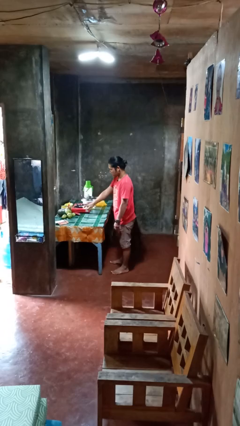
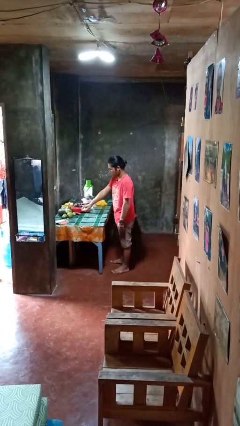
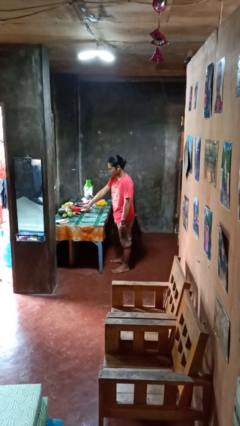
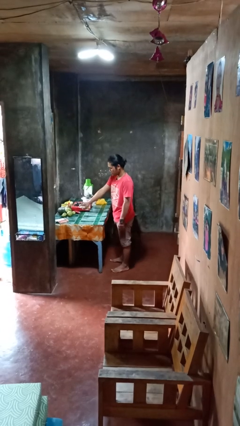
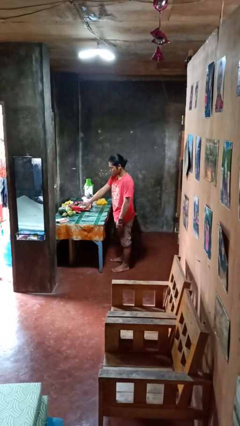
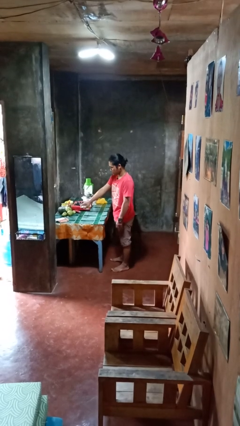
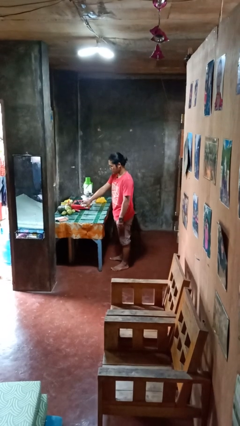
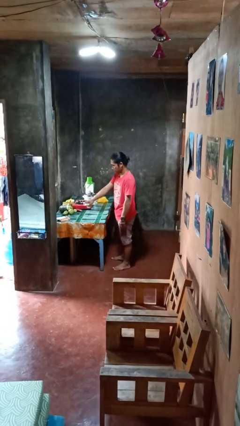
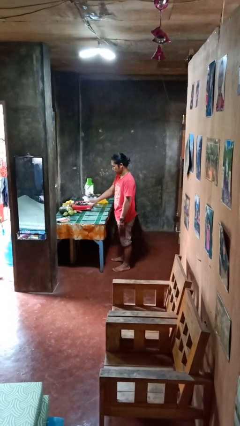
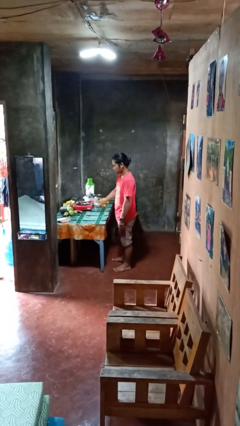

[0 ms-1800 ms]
person sprays from bottle

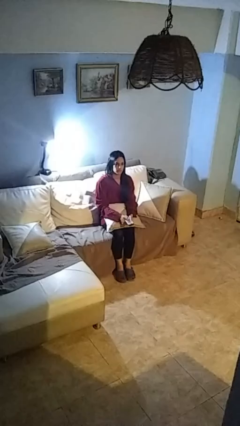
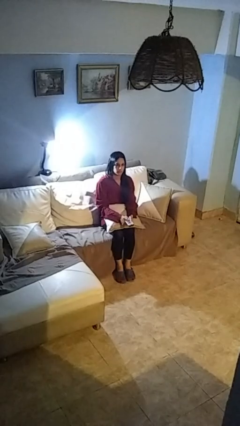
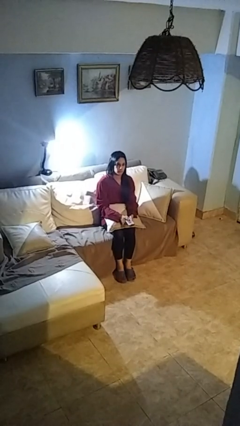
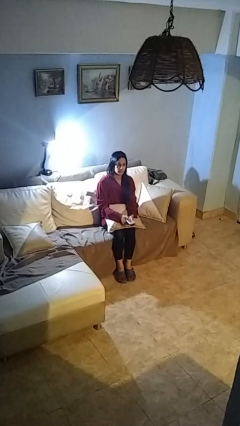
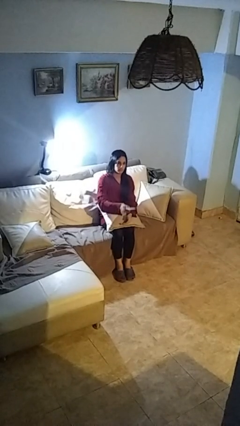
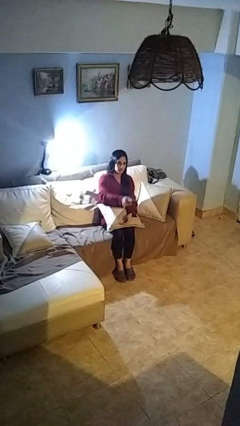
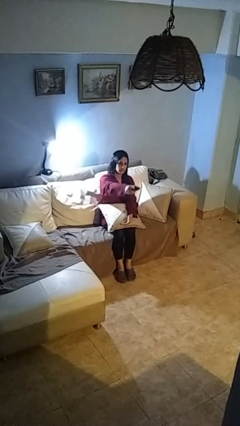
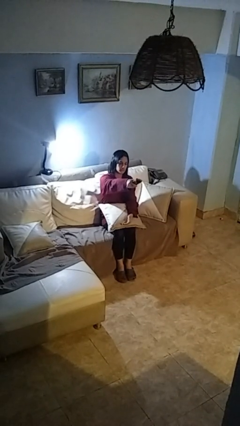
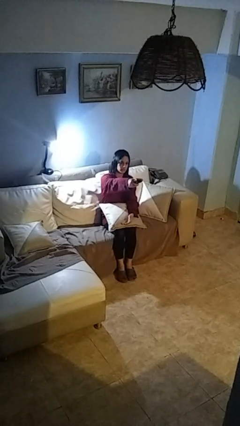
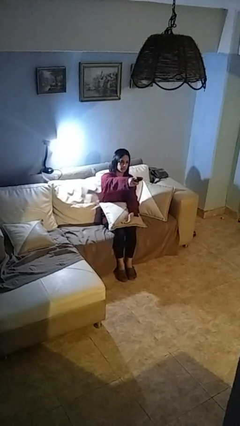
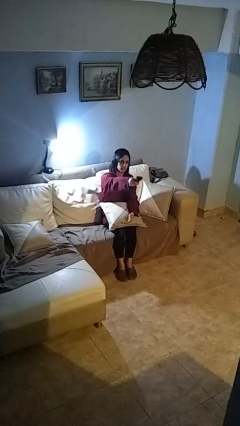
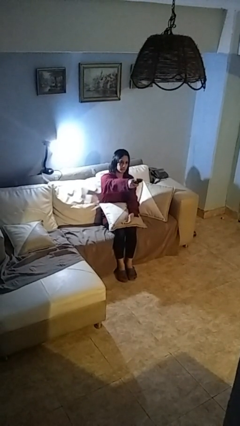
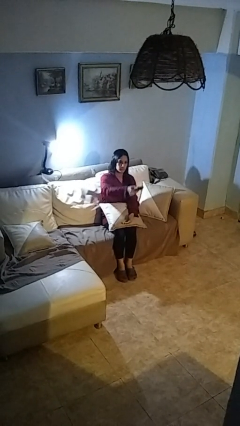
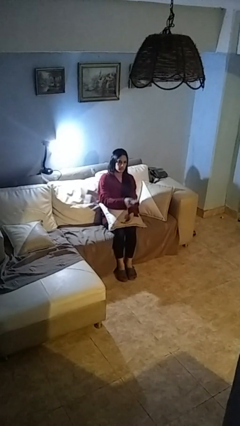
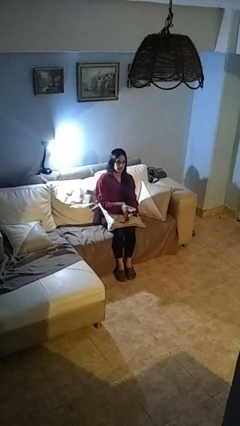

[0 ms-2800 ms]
person uses television remote

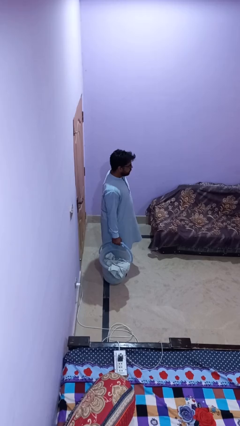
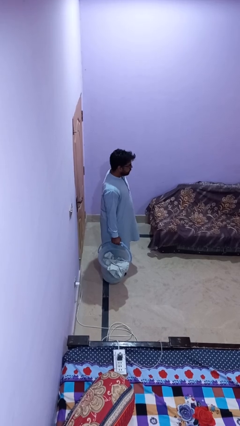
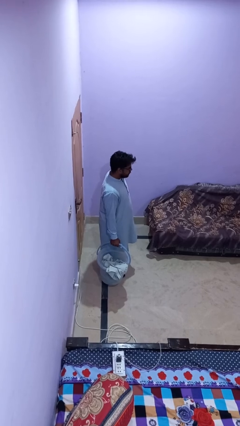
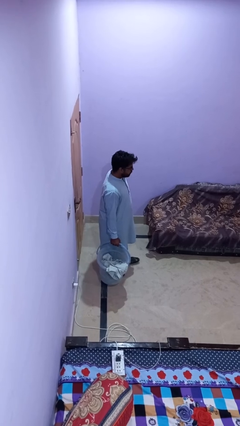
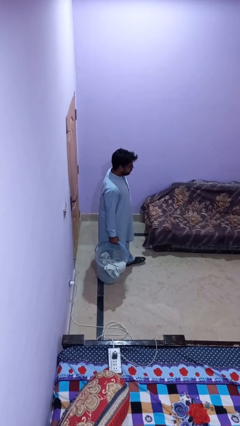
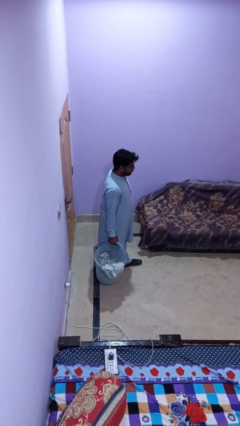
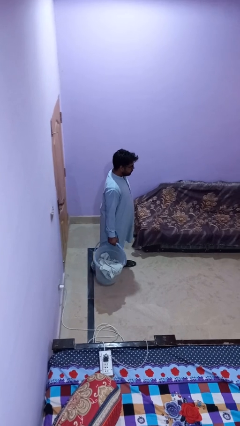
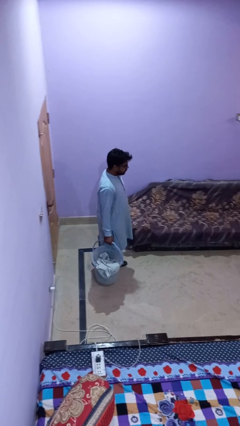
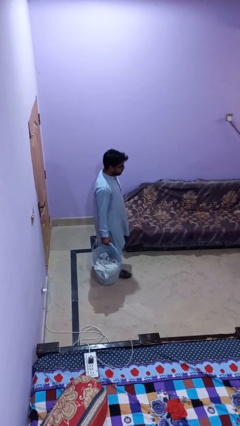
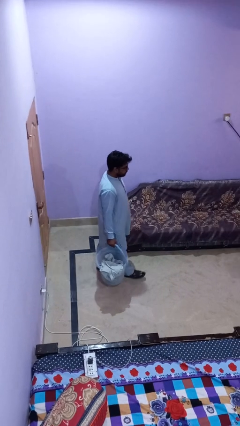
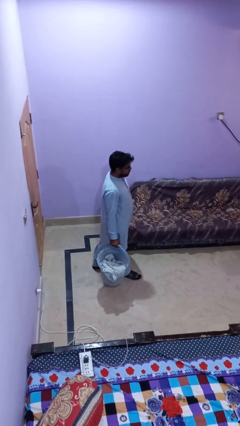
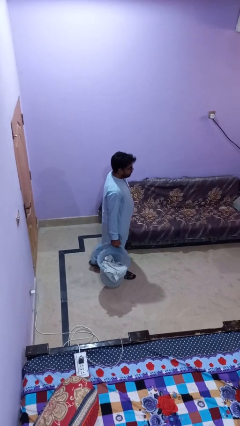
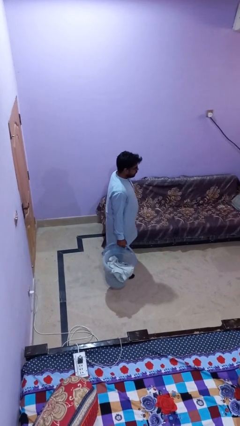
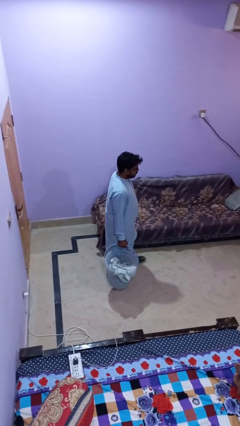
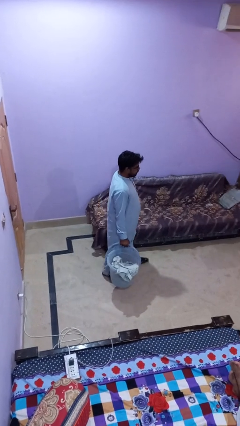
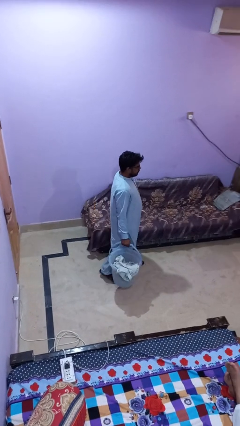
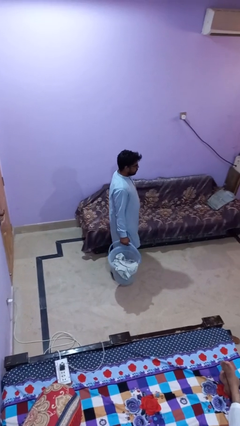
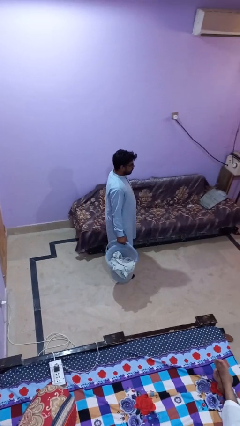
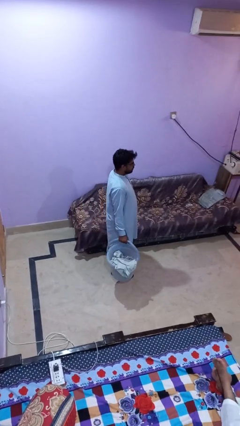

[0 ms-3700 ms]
person carries laundry basket

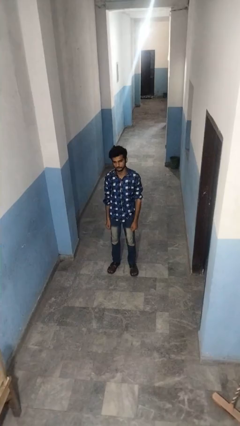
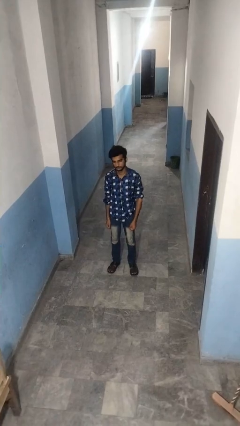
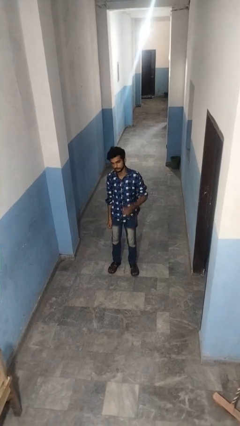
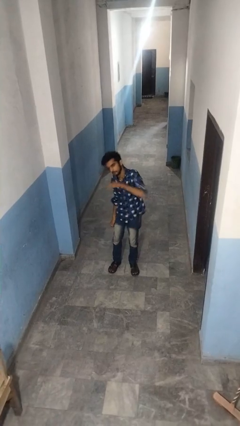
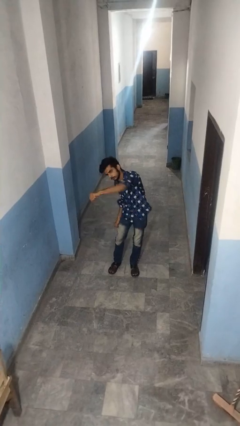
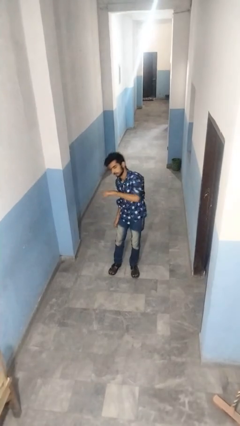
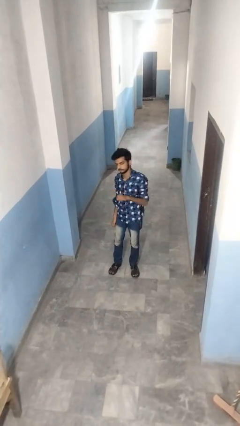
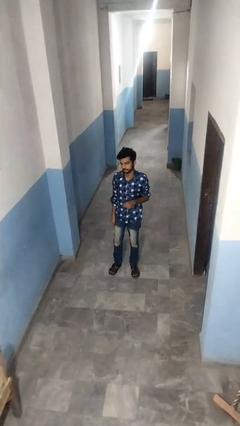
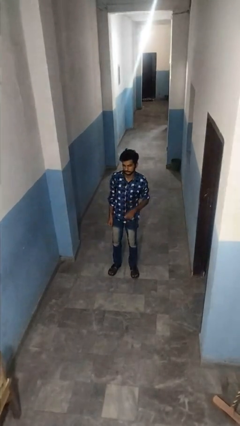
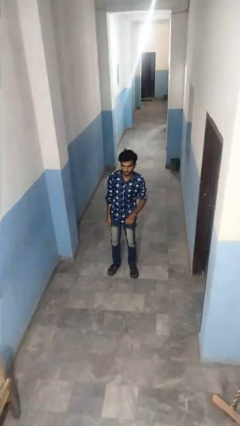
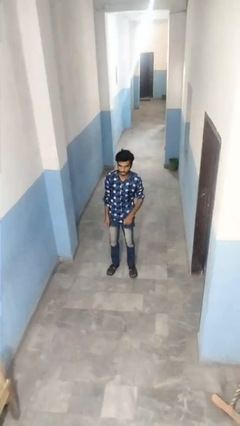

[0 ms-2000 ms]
person punches

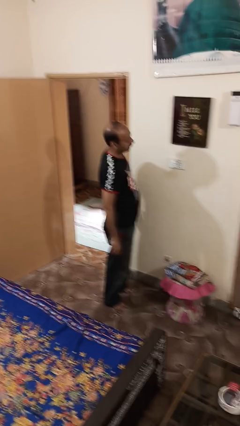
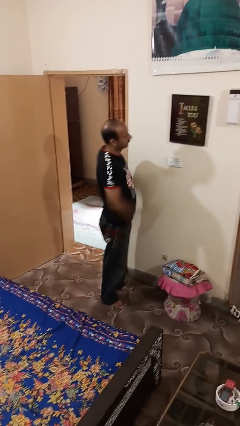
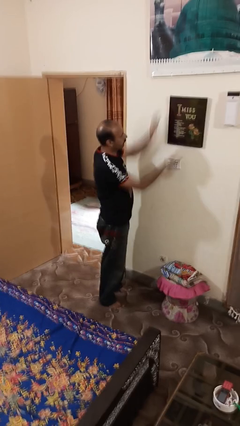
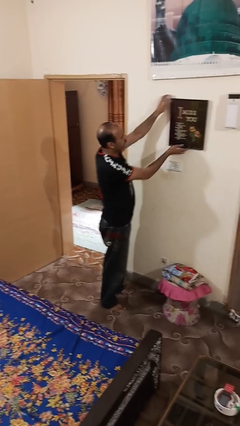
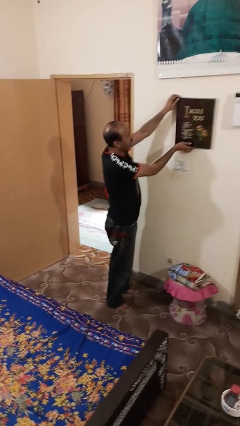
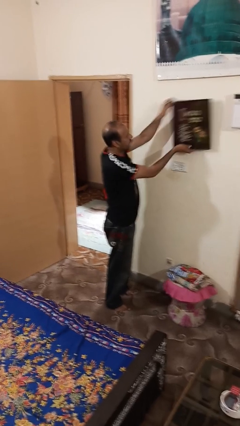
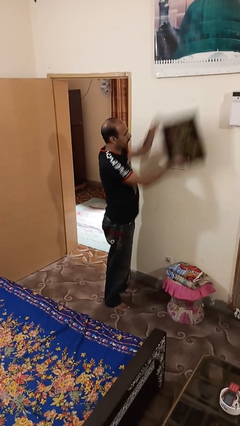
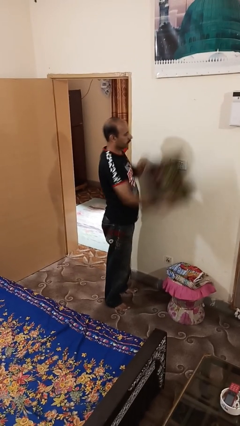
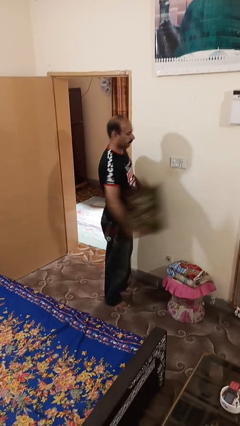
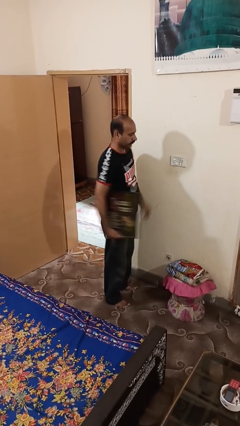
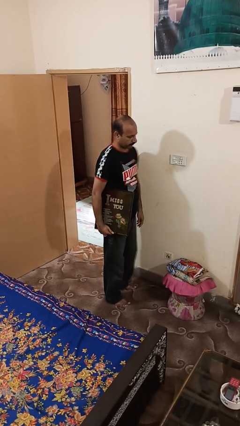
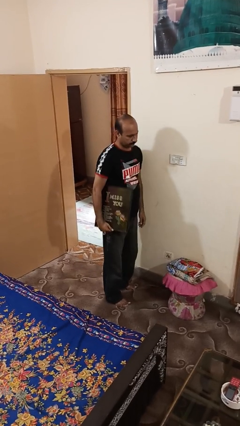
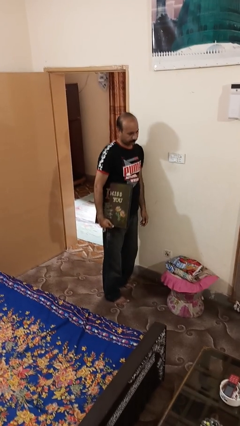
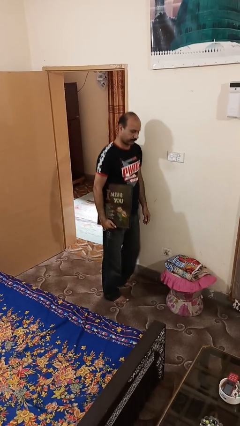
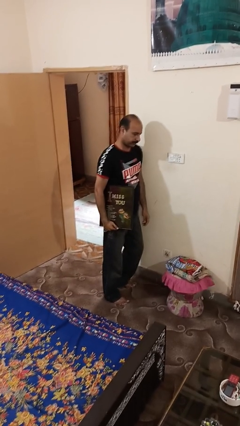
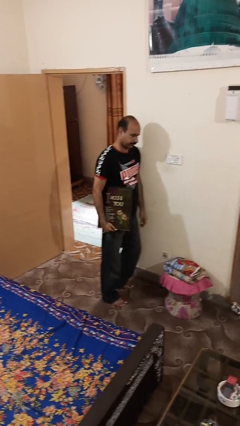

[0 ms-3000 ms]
person takes down picture frame

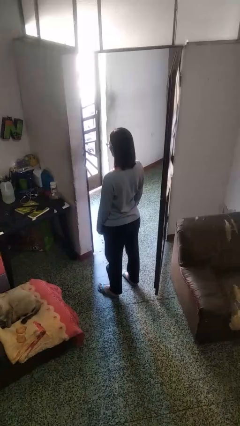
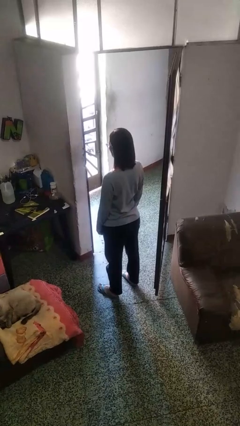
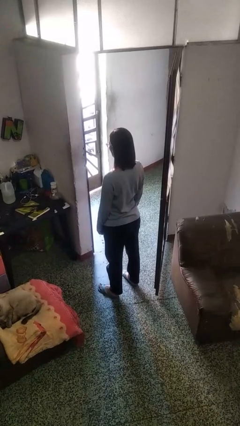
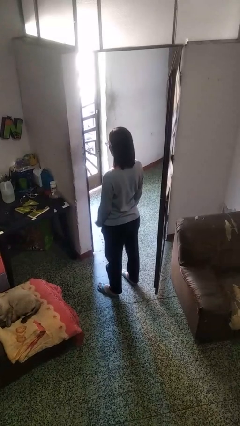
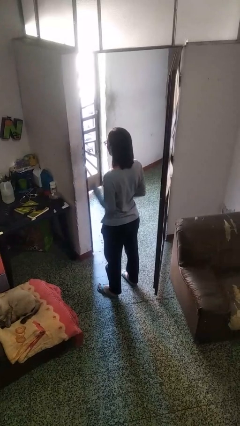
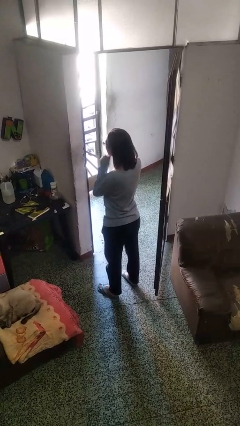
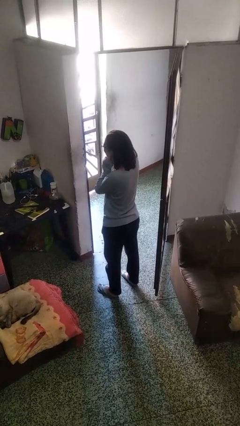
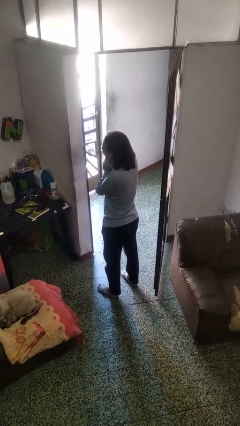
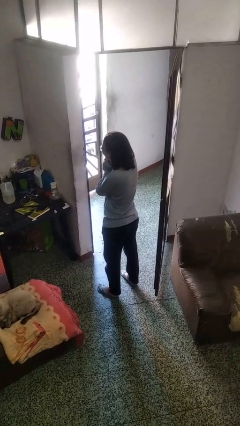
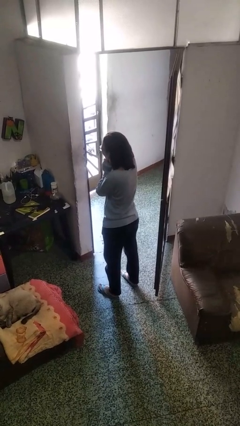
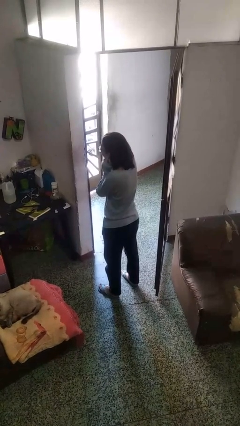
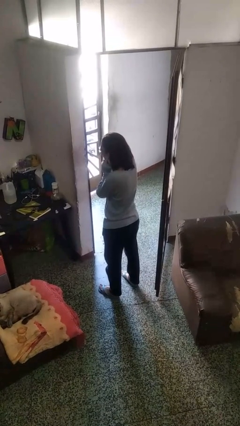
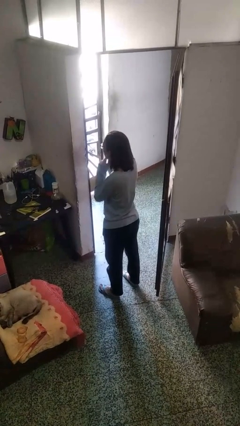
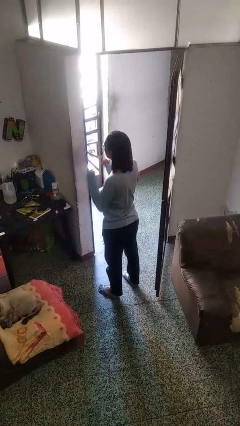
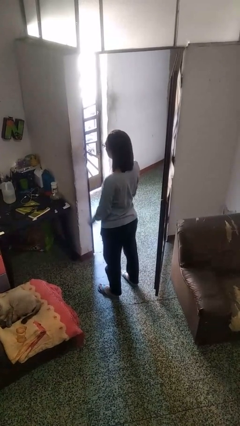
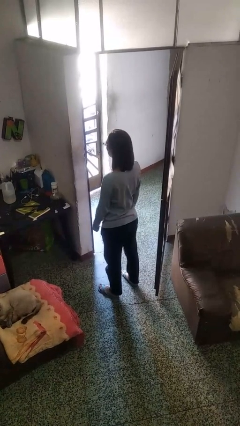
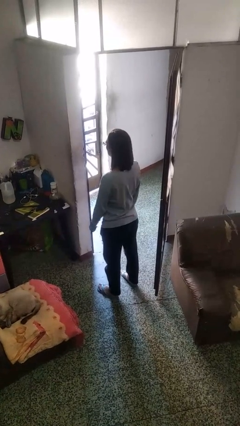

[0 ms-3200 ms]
person puts fingers in ear

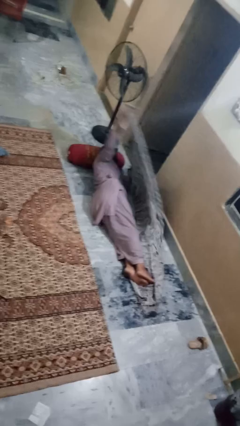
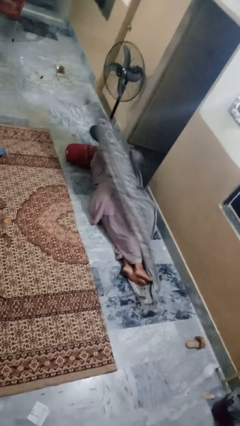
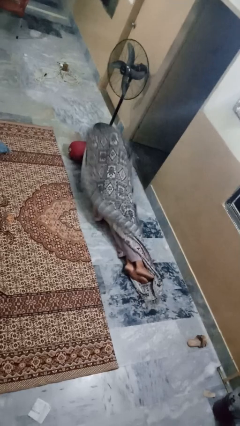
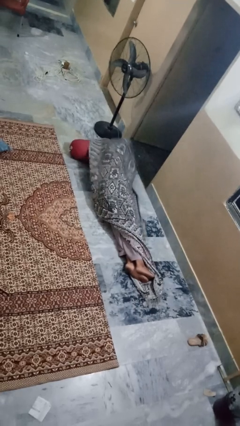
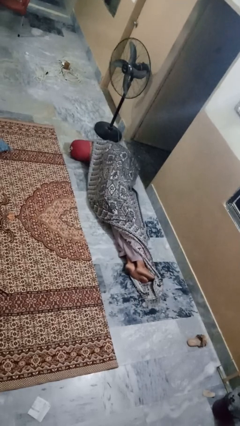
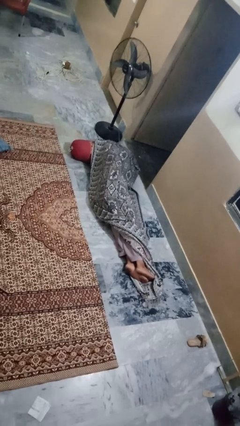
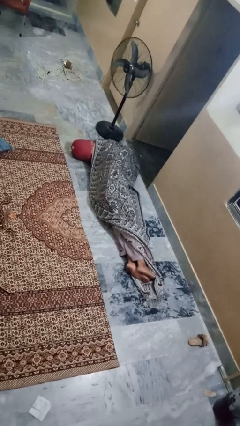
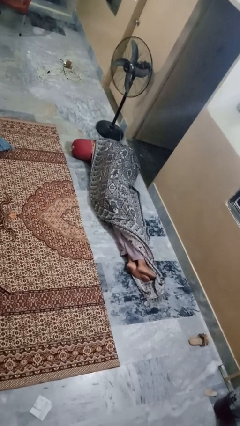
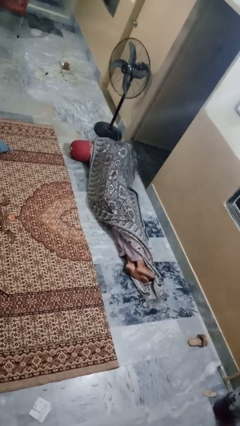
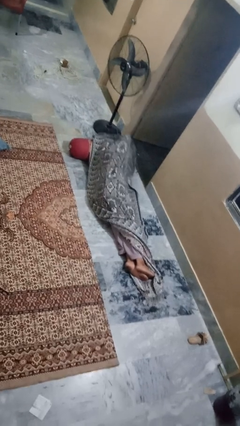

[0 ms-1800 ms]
person covers with blanket
